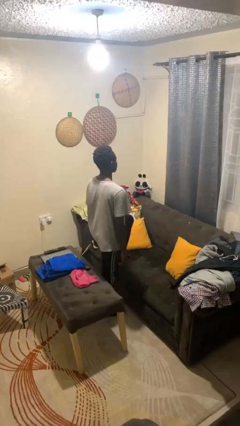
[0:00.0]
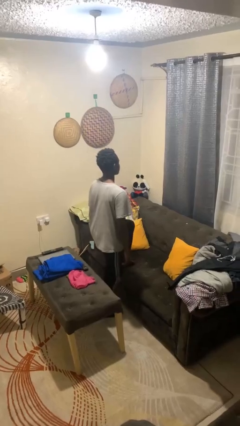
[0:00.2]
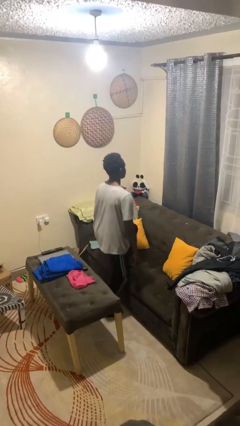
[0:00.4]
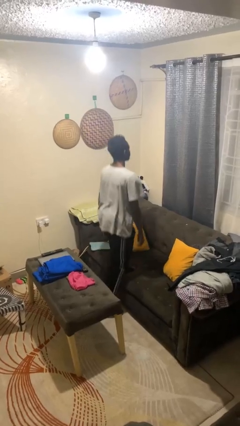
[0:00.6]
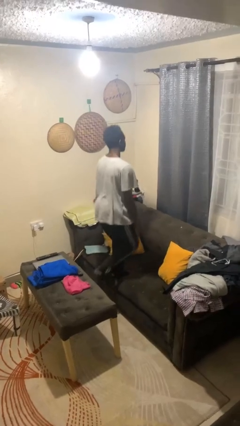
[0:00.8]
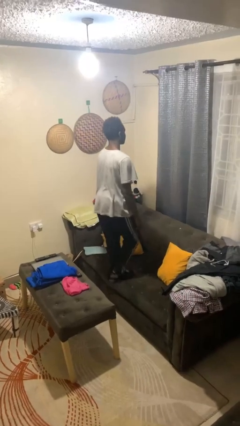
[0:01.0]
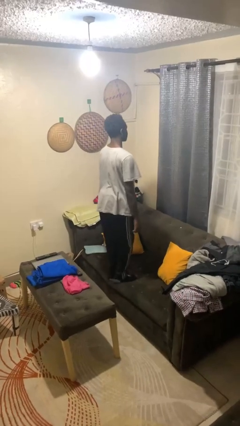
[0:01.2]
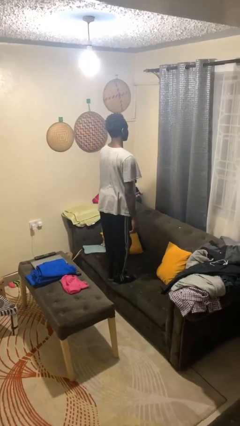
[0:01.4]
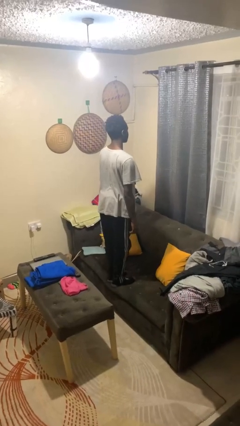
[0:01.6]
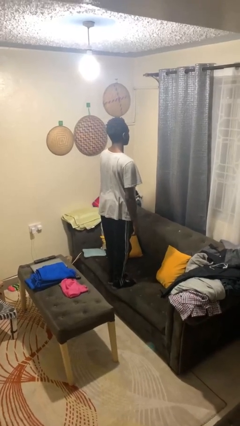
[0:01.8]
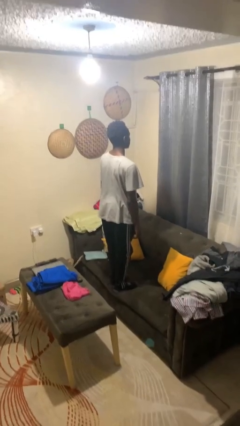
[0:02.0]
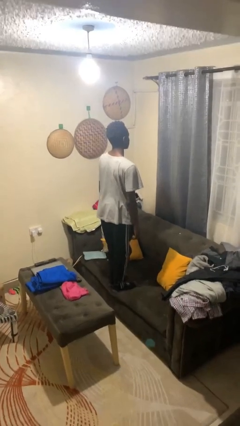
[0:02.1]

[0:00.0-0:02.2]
person jumps on couch

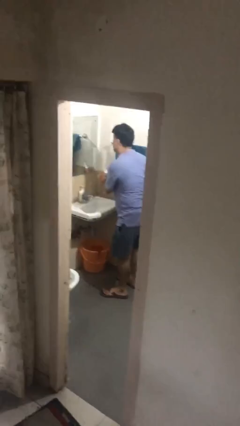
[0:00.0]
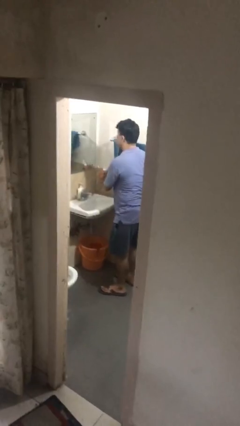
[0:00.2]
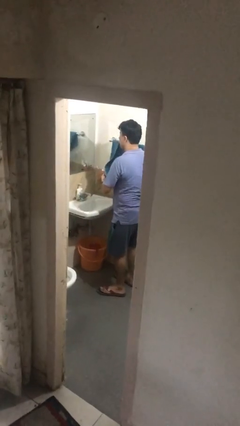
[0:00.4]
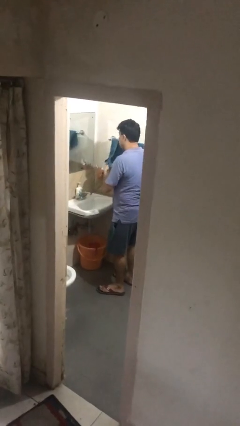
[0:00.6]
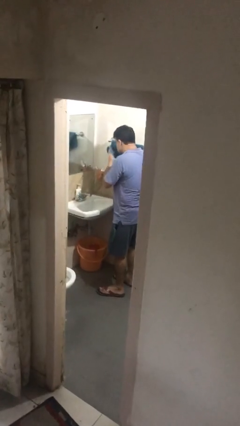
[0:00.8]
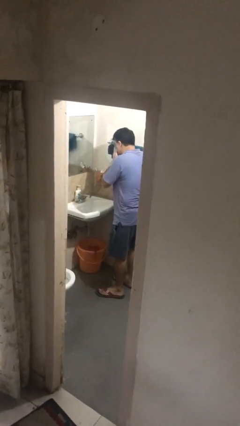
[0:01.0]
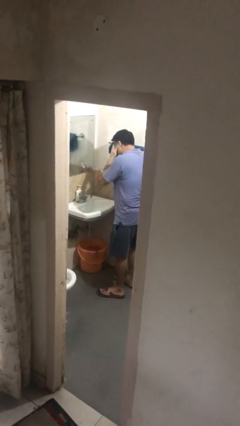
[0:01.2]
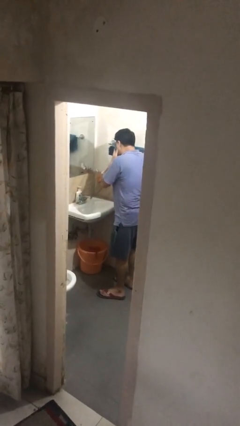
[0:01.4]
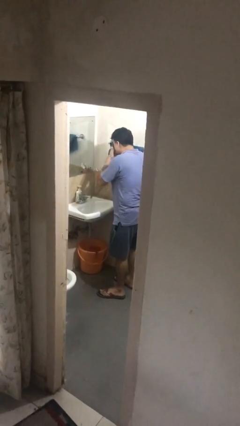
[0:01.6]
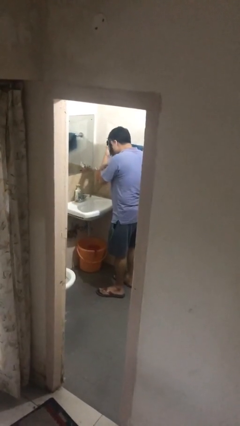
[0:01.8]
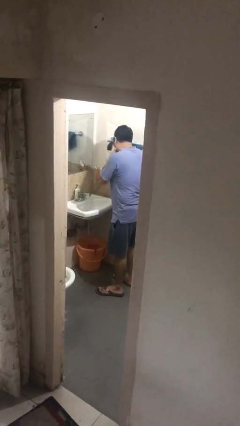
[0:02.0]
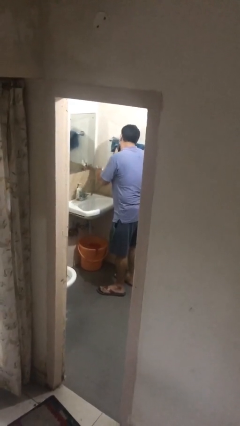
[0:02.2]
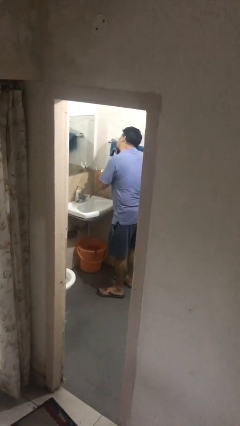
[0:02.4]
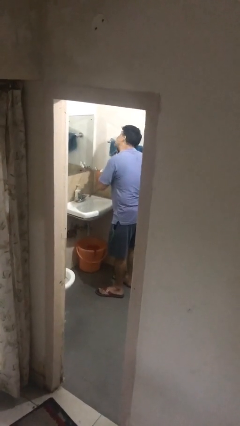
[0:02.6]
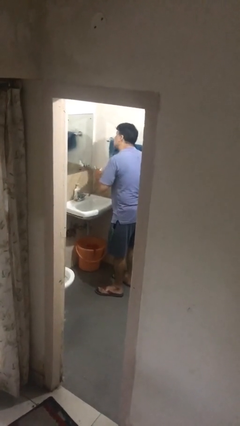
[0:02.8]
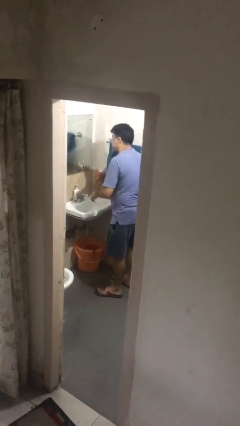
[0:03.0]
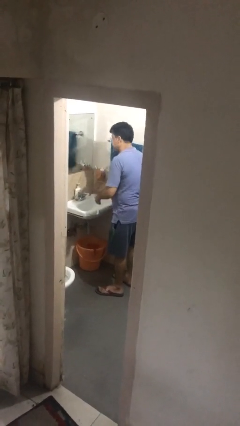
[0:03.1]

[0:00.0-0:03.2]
person dries face with towel

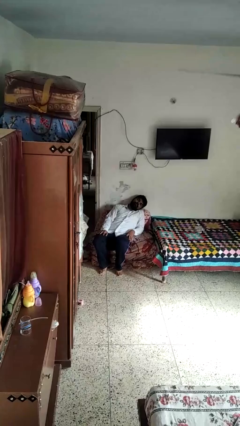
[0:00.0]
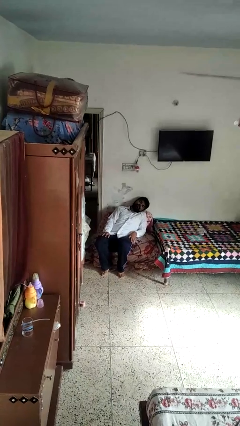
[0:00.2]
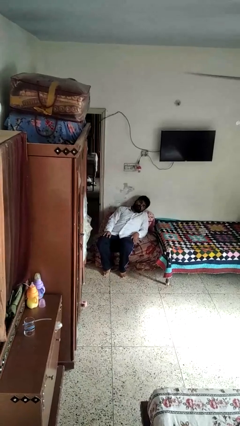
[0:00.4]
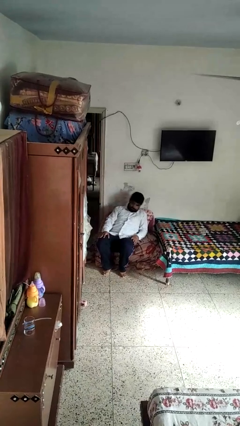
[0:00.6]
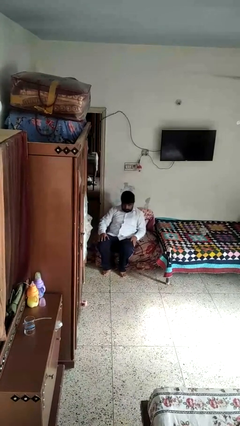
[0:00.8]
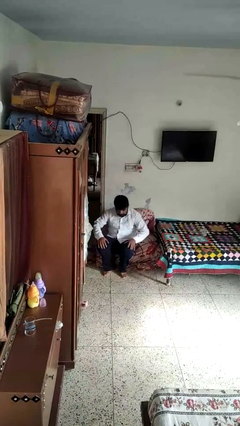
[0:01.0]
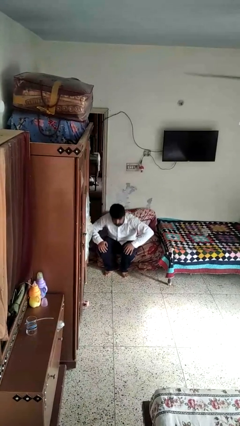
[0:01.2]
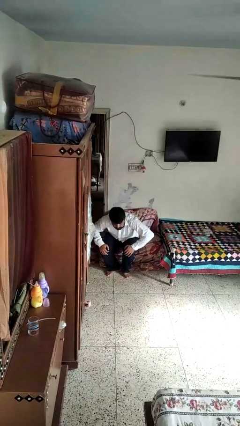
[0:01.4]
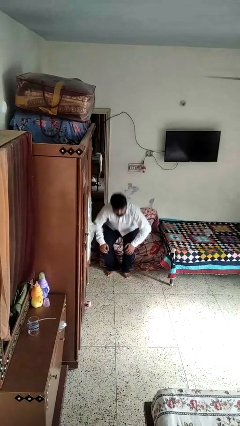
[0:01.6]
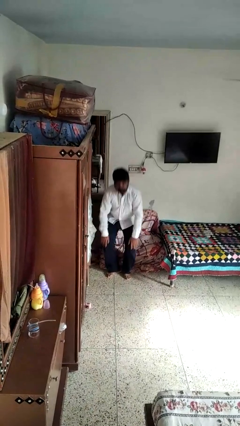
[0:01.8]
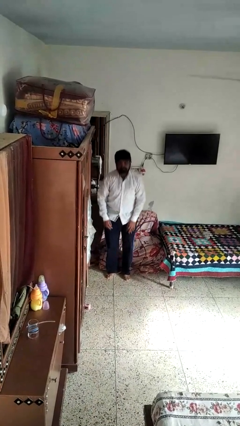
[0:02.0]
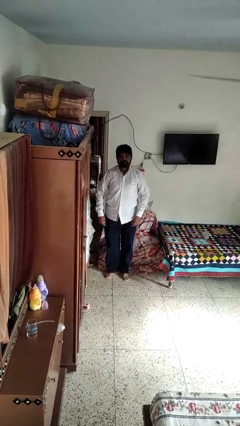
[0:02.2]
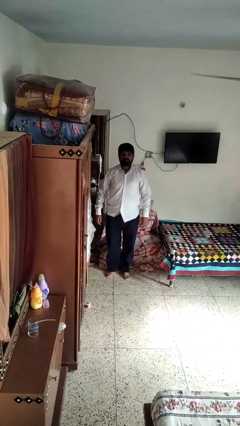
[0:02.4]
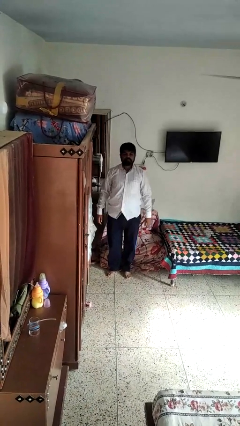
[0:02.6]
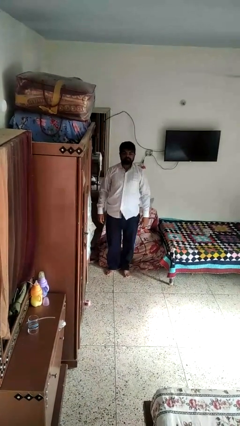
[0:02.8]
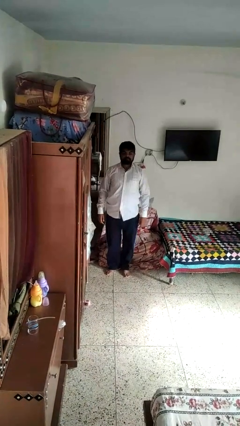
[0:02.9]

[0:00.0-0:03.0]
person stands up

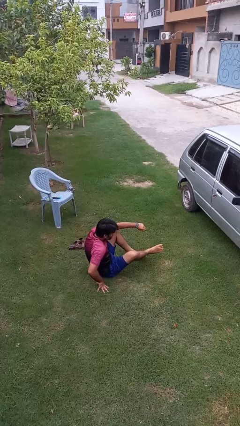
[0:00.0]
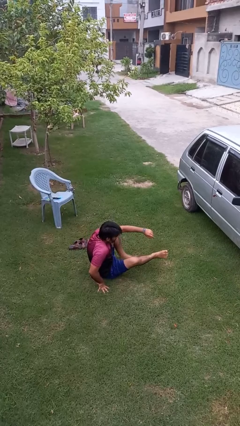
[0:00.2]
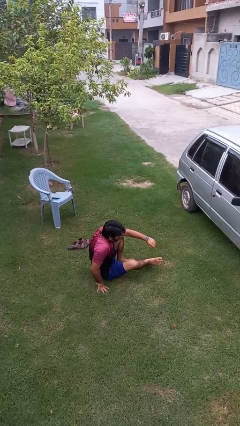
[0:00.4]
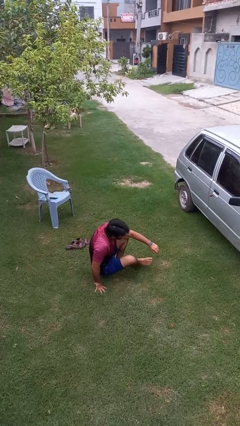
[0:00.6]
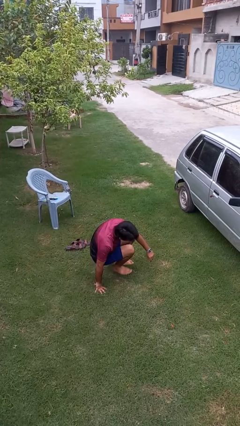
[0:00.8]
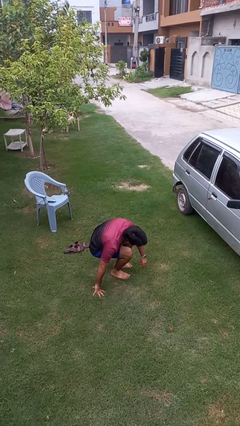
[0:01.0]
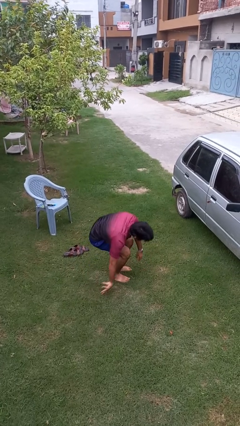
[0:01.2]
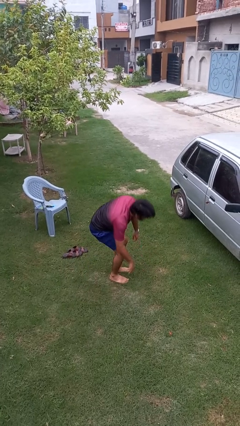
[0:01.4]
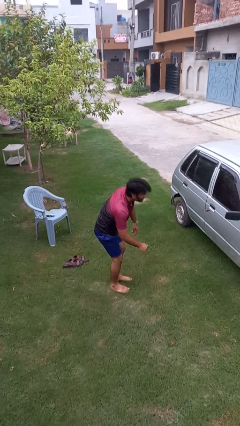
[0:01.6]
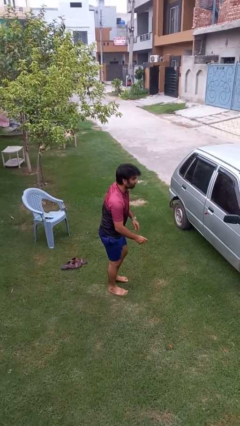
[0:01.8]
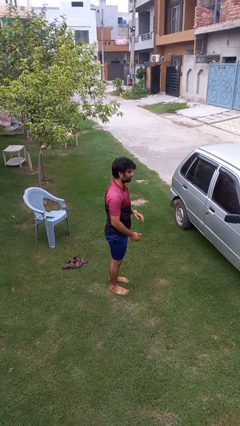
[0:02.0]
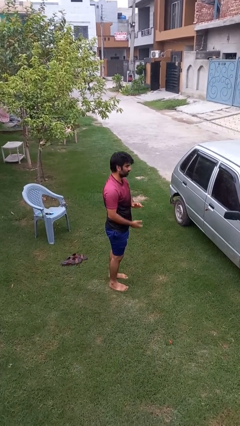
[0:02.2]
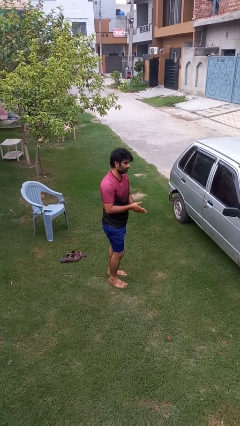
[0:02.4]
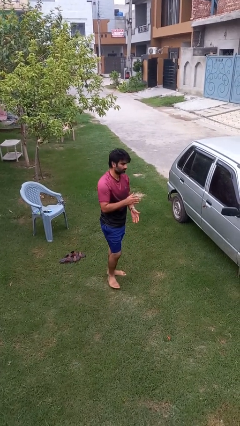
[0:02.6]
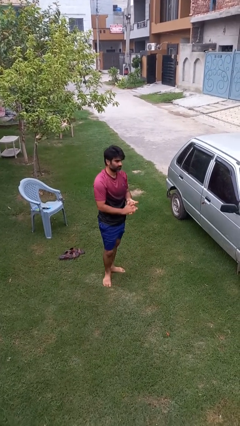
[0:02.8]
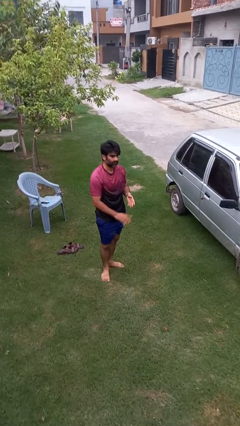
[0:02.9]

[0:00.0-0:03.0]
person stands up from floor

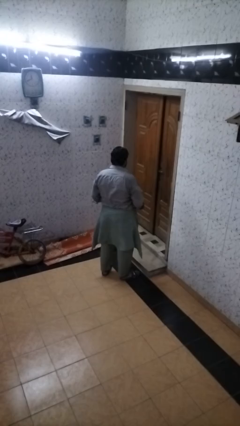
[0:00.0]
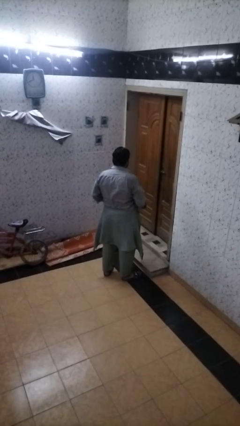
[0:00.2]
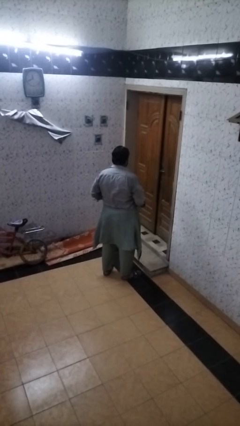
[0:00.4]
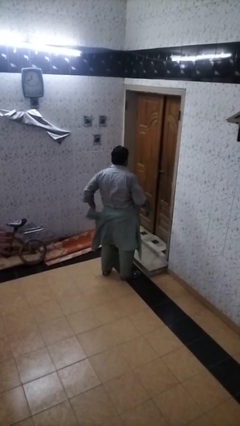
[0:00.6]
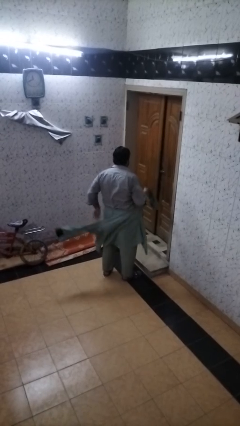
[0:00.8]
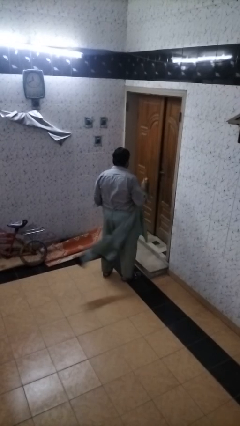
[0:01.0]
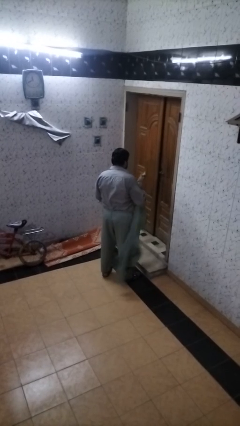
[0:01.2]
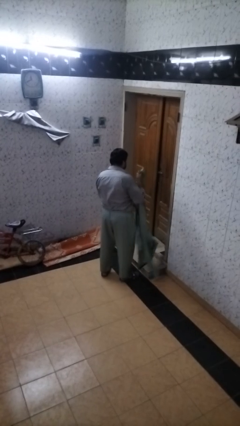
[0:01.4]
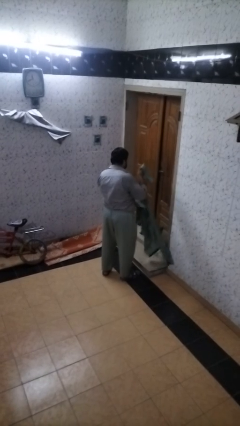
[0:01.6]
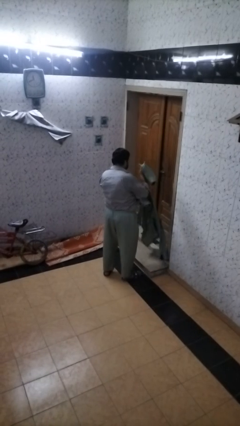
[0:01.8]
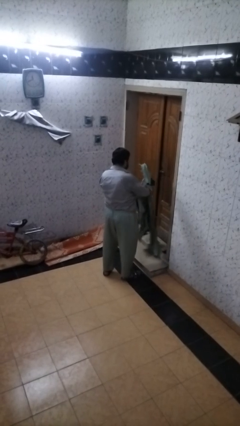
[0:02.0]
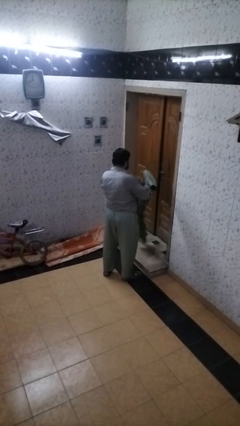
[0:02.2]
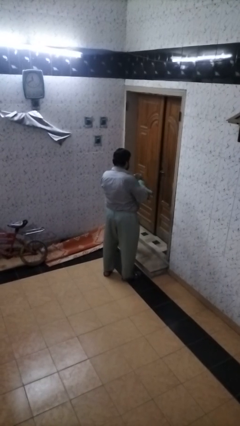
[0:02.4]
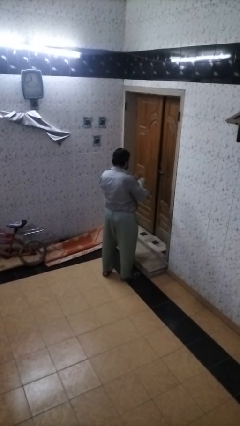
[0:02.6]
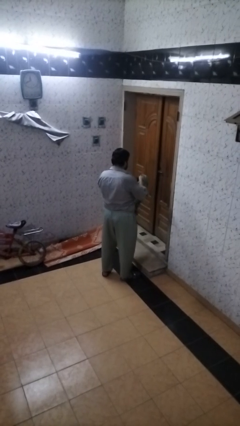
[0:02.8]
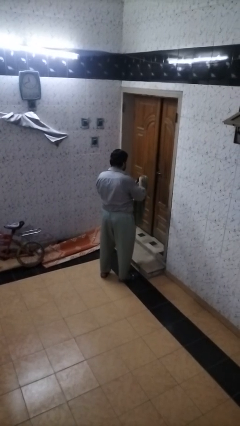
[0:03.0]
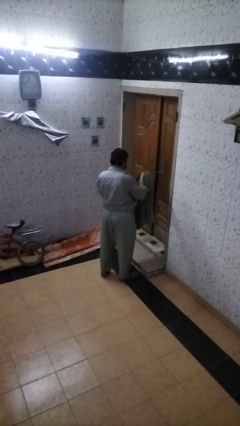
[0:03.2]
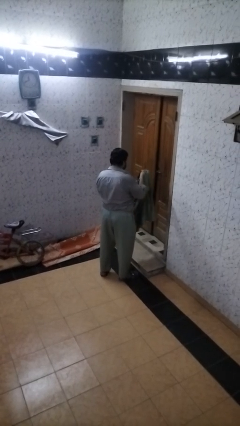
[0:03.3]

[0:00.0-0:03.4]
person unties jacket around waist

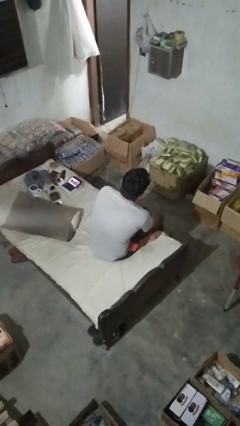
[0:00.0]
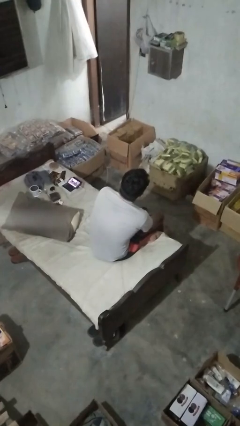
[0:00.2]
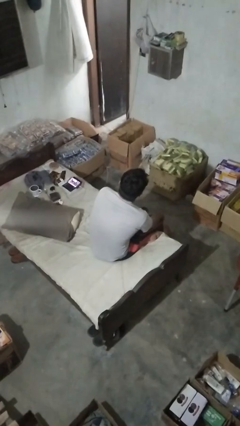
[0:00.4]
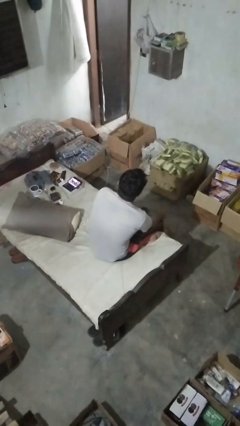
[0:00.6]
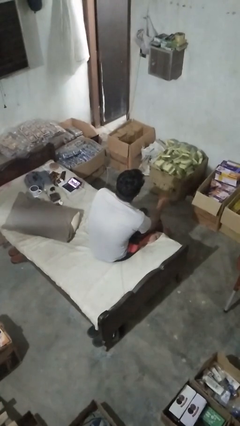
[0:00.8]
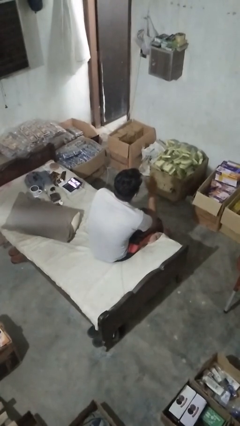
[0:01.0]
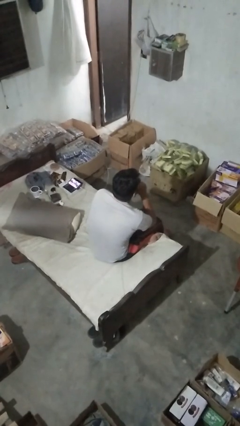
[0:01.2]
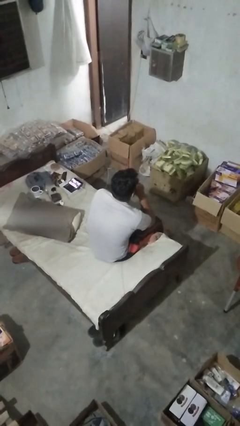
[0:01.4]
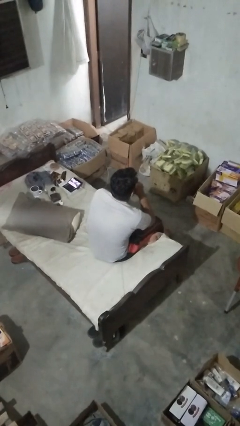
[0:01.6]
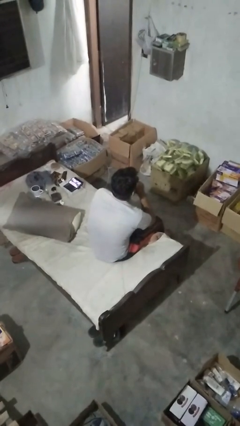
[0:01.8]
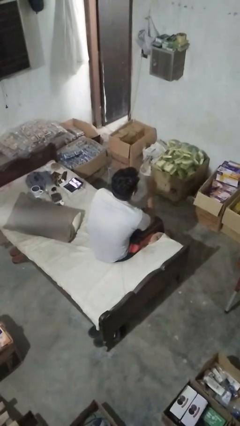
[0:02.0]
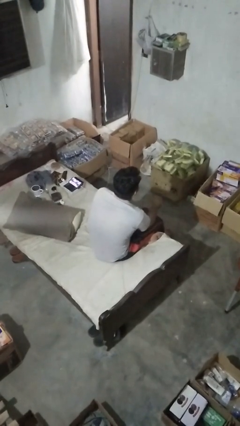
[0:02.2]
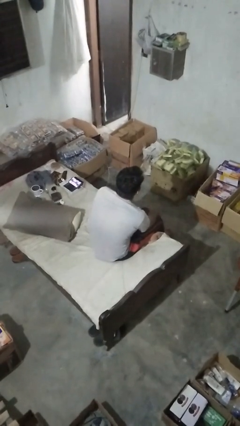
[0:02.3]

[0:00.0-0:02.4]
person gestures be quiet
